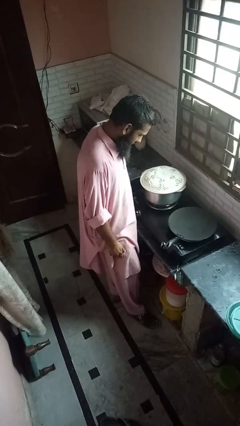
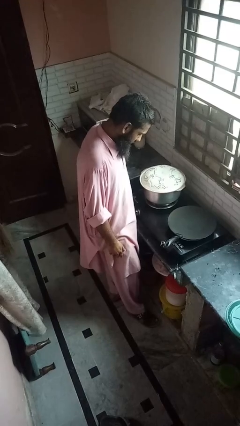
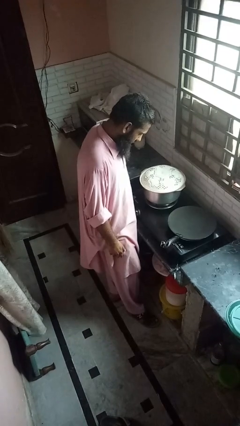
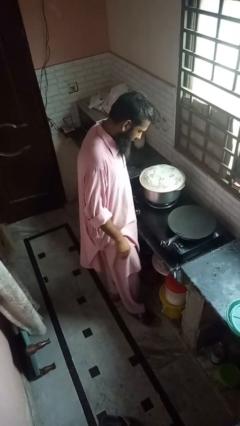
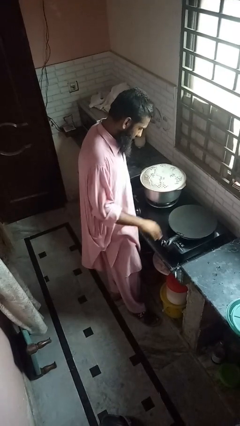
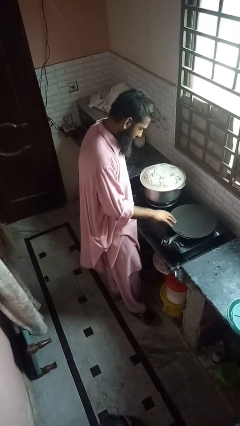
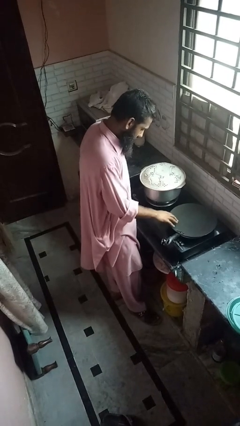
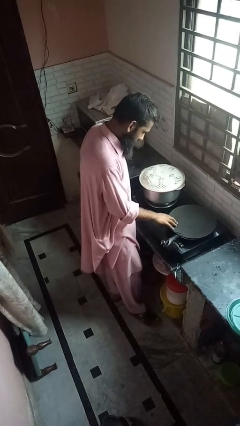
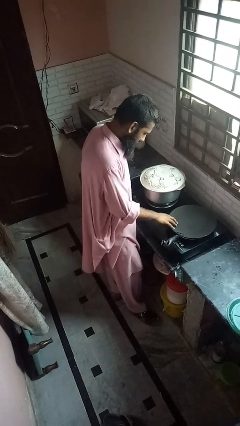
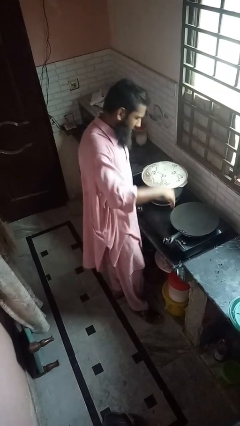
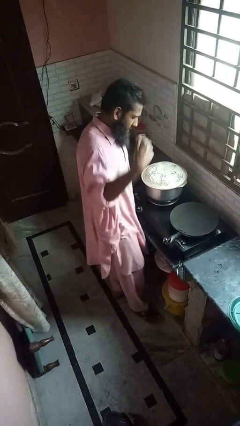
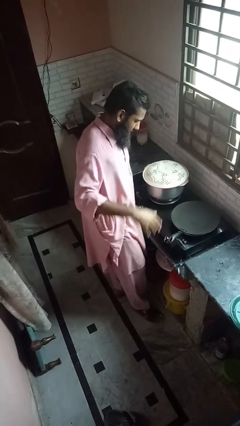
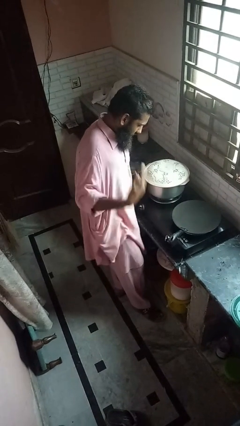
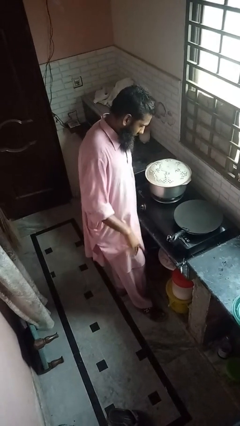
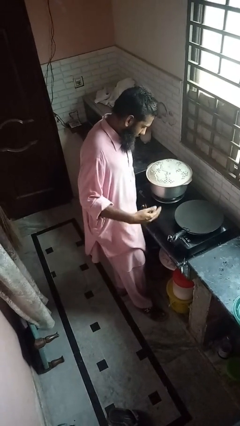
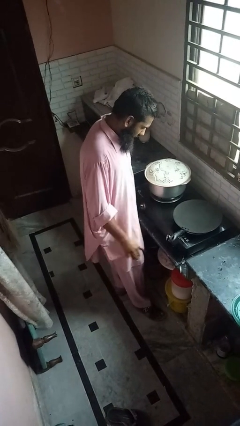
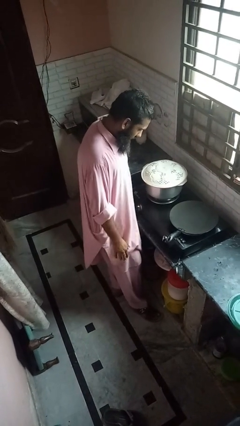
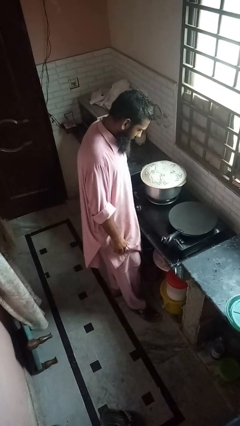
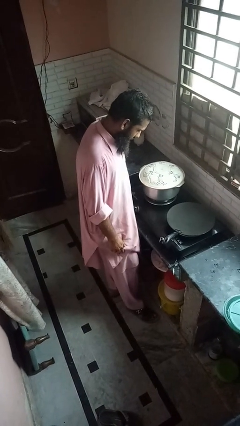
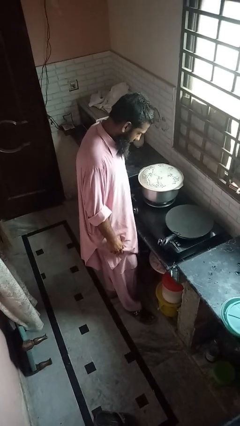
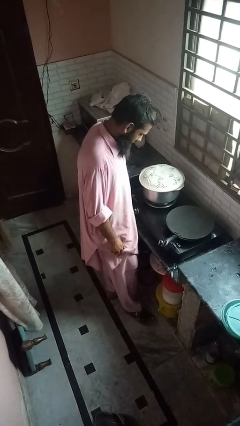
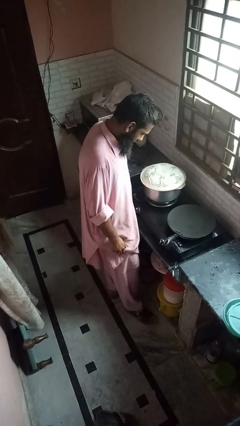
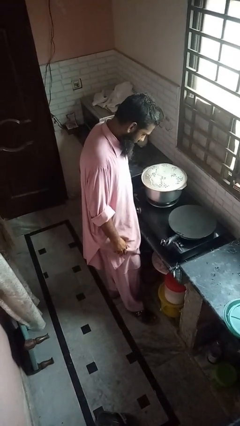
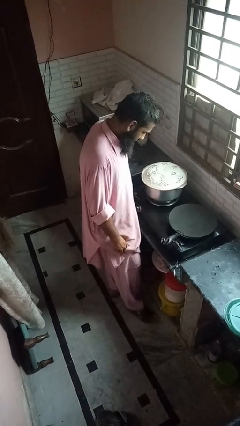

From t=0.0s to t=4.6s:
person burns hand

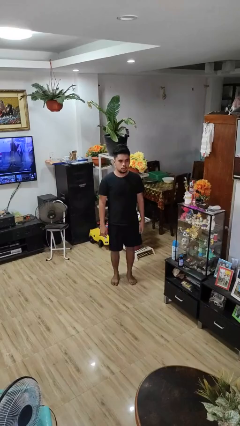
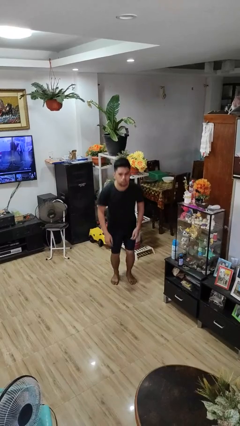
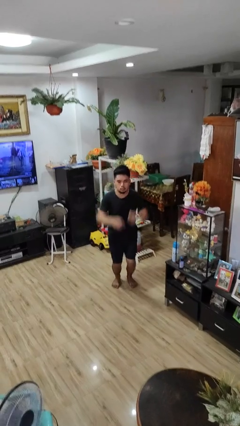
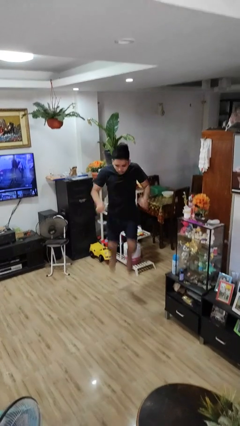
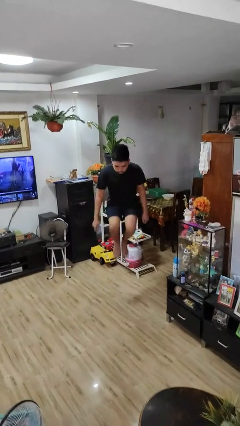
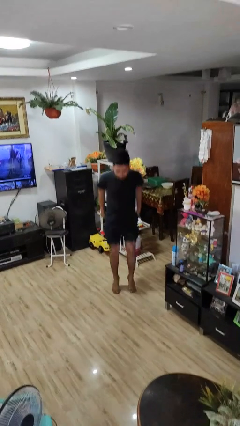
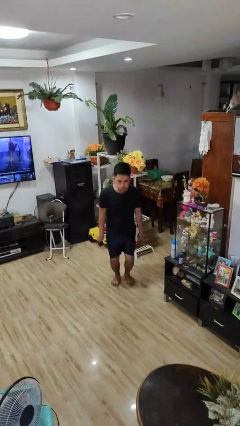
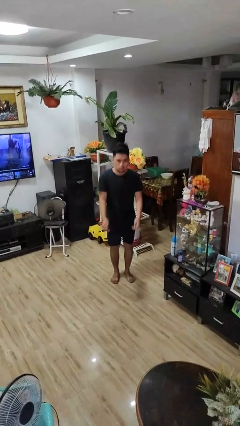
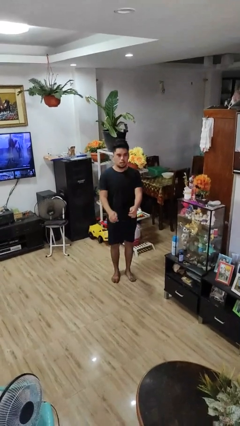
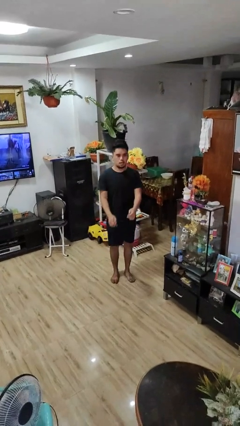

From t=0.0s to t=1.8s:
person jumps

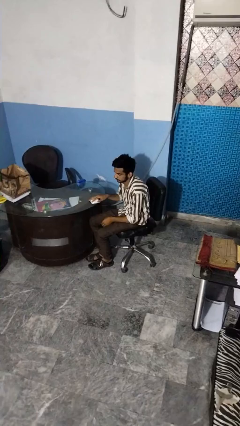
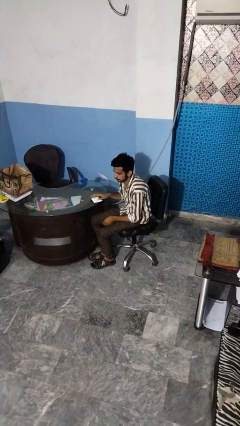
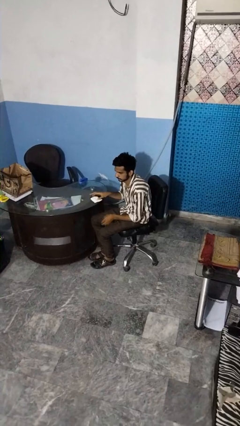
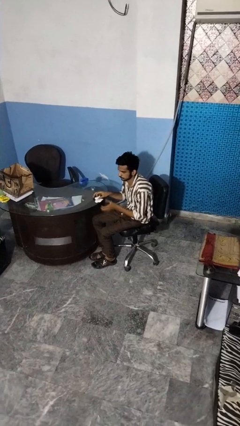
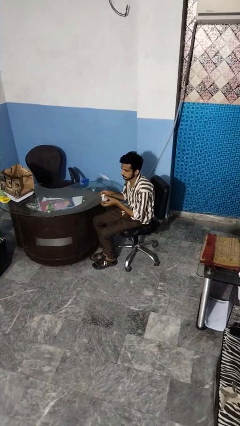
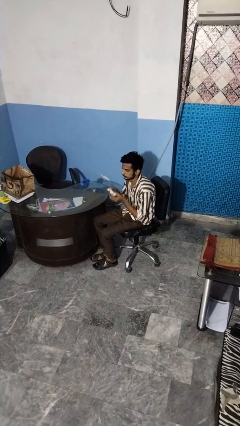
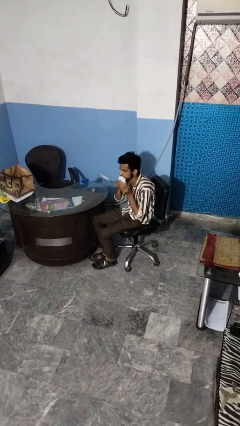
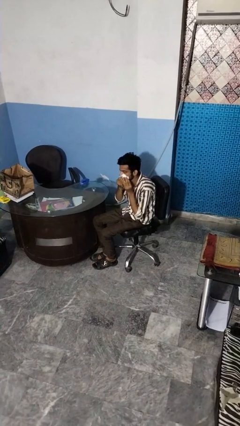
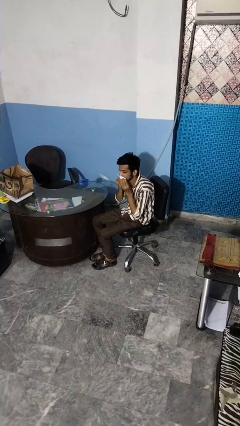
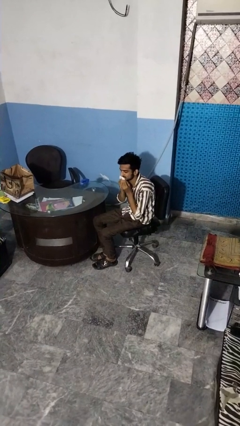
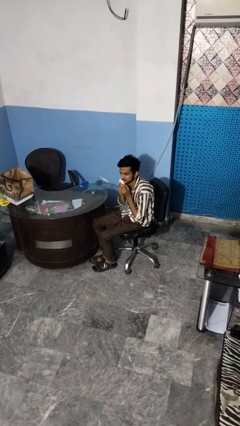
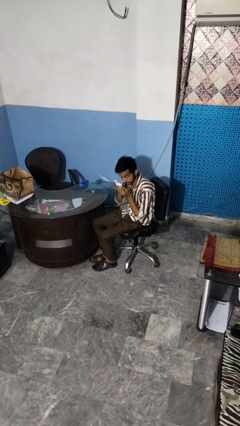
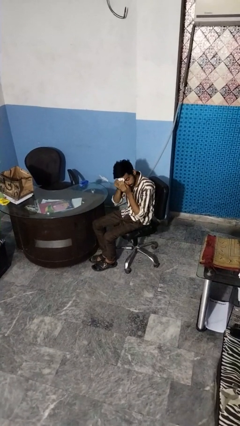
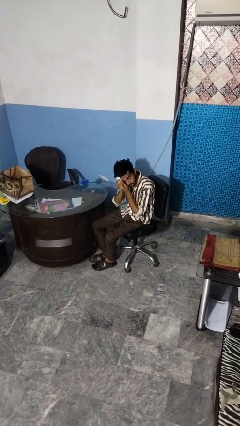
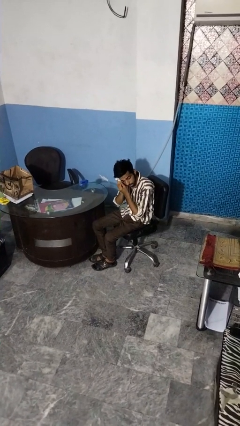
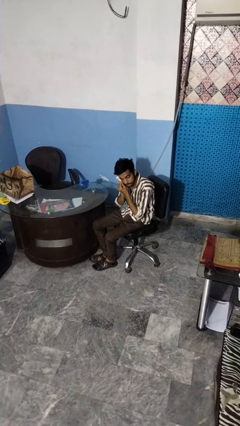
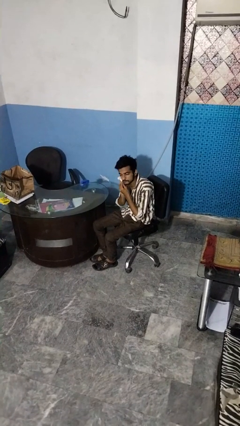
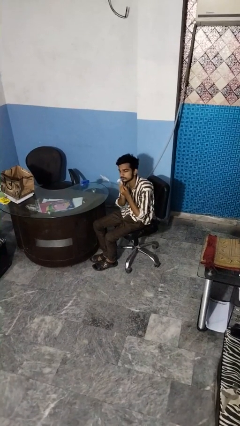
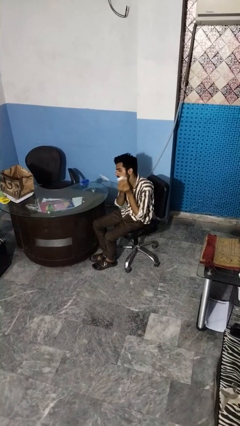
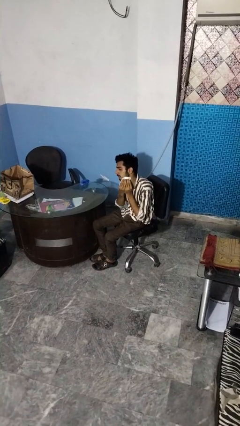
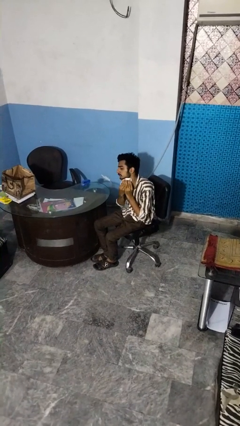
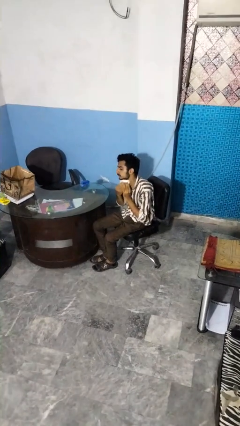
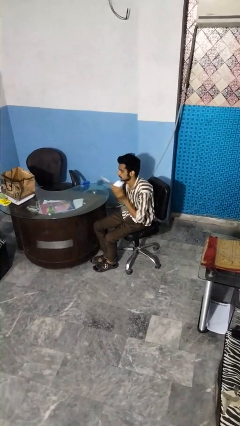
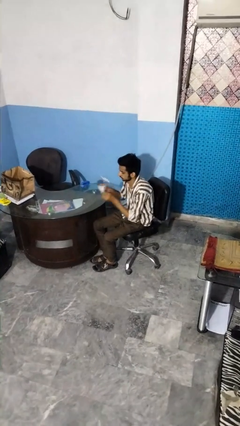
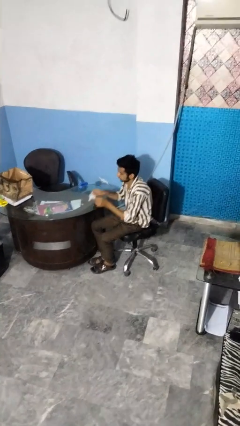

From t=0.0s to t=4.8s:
person wipes mouth with napkin

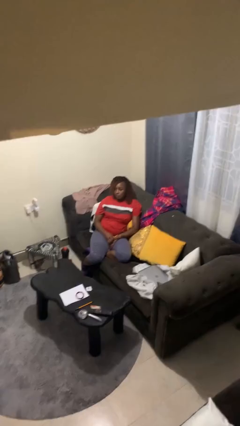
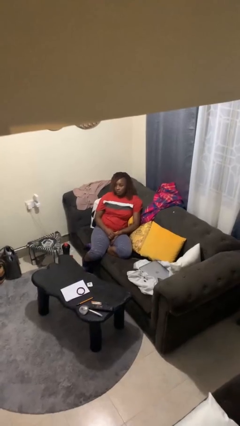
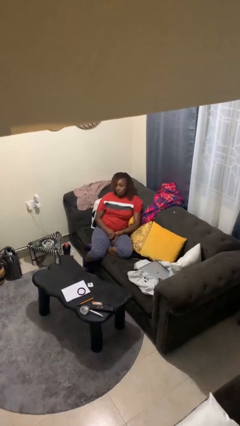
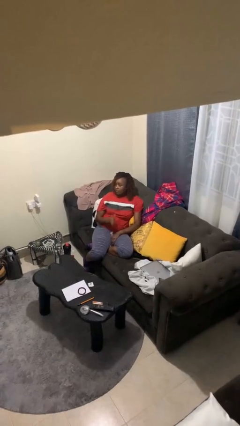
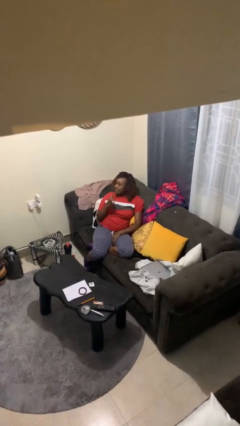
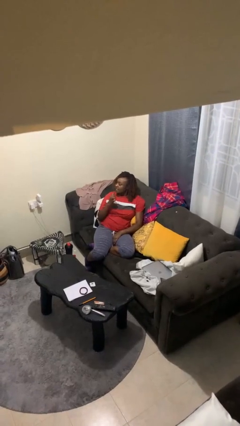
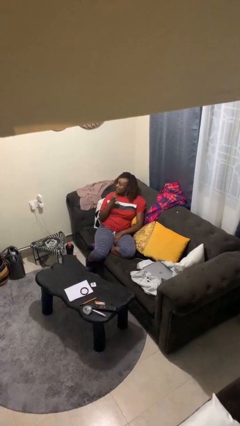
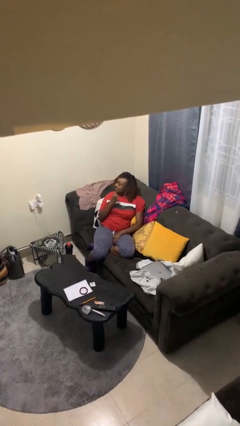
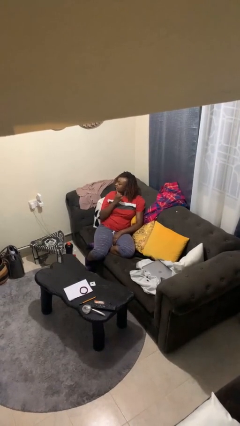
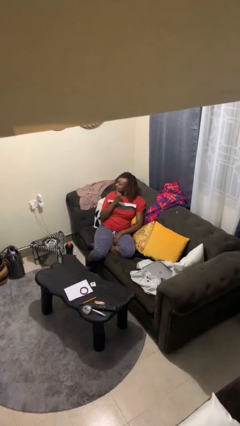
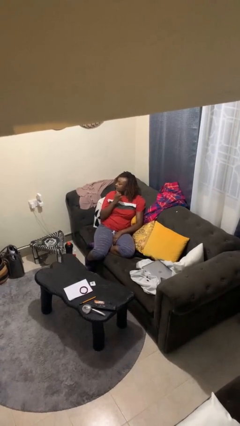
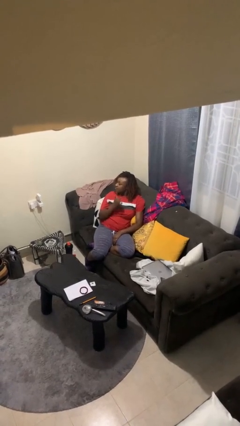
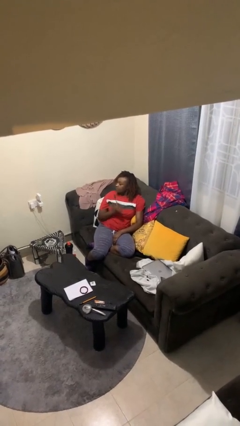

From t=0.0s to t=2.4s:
person brushes teeth

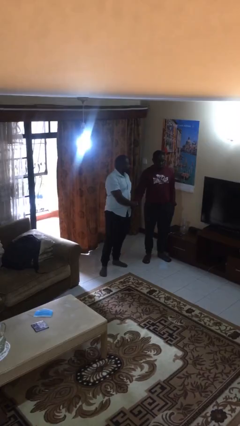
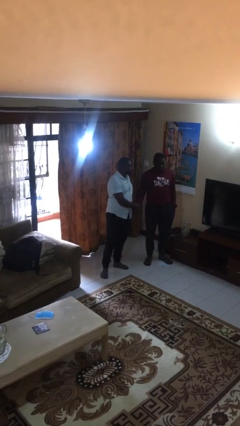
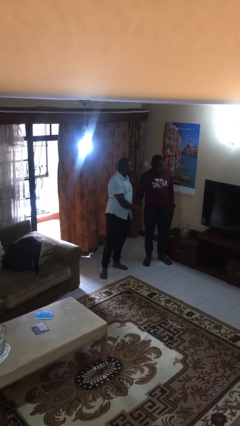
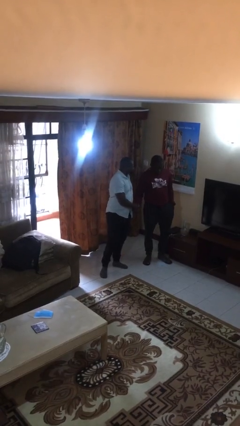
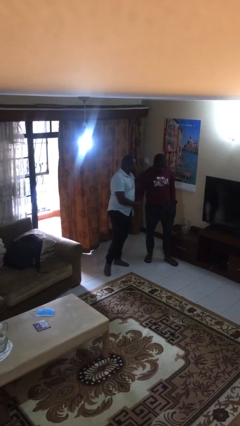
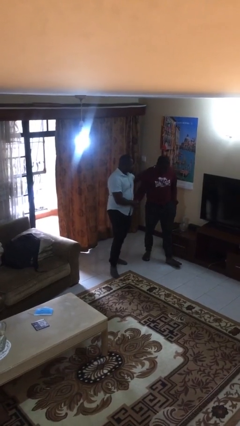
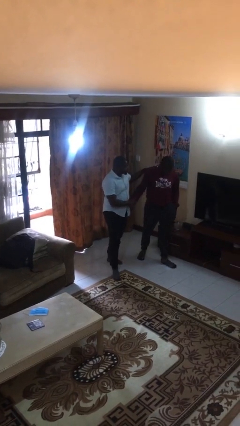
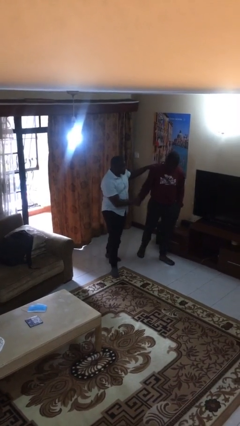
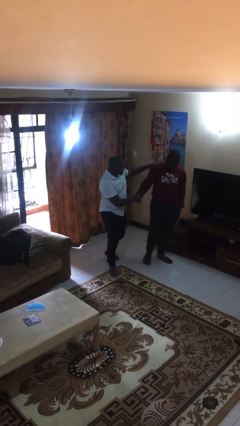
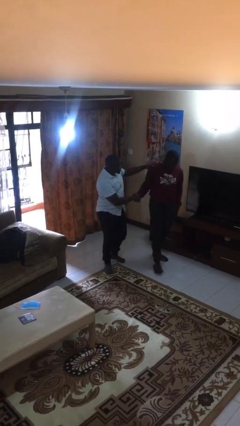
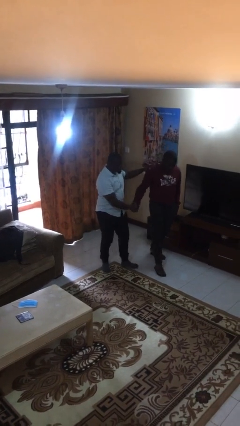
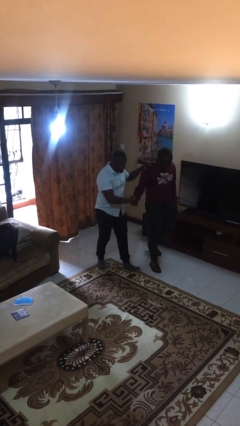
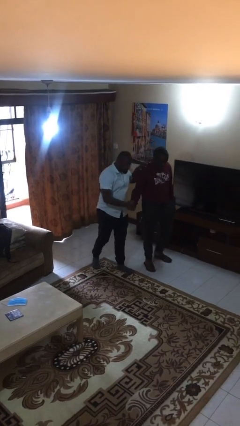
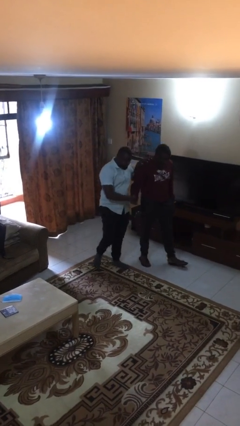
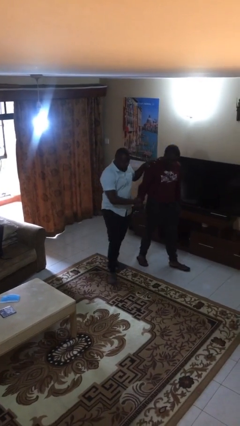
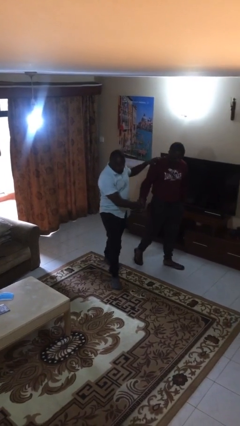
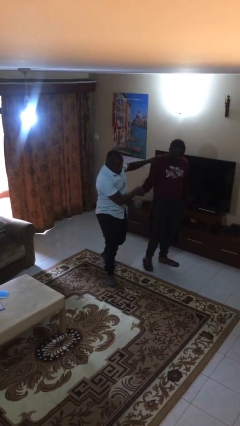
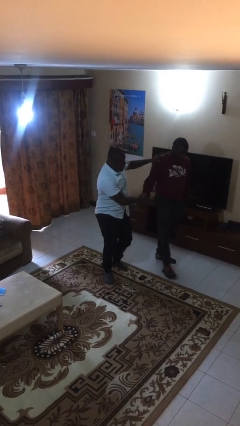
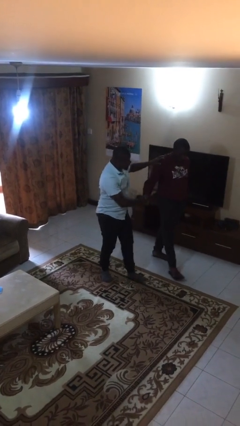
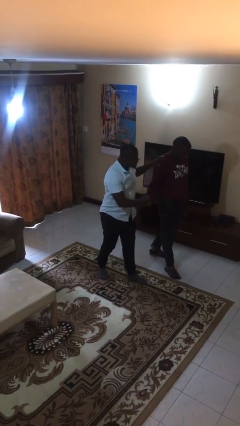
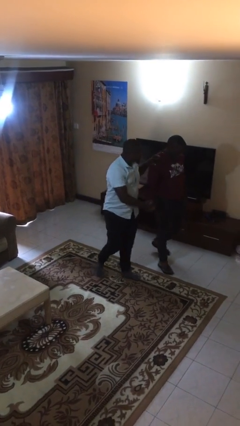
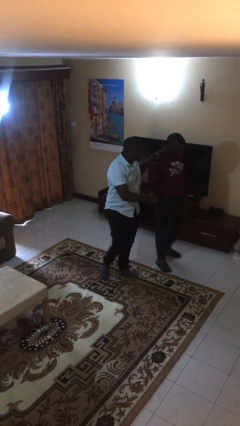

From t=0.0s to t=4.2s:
person holds hand

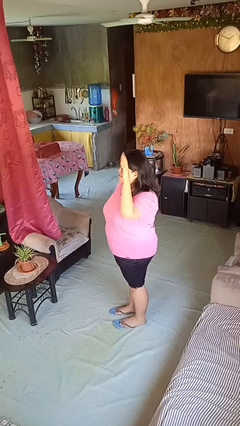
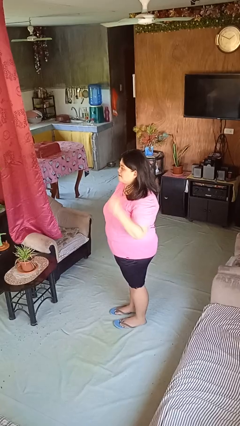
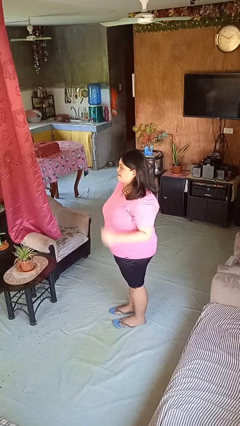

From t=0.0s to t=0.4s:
person gestures lower hand
